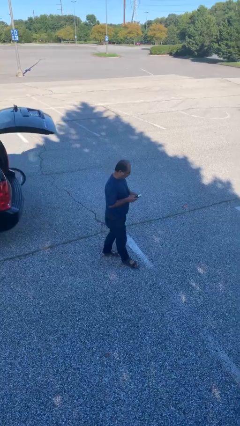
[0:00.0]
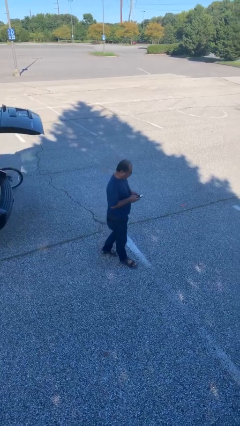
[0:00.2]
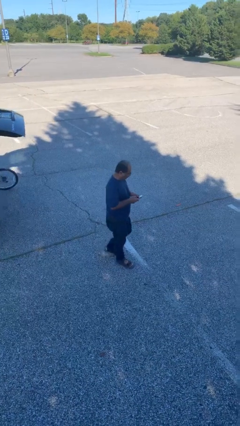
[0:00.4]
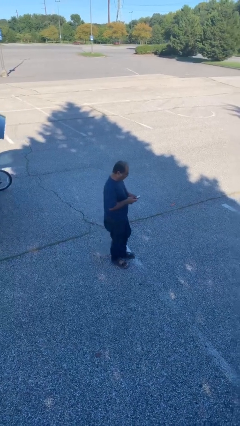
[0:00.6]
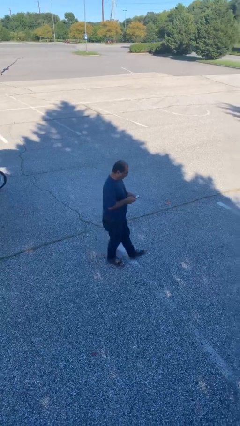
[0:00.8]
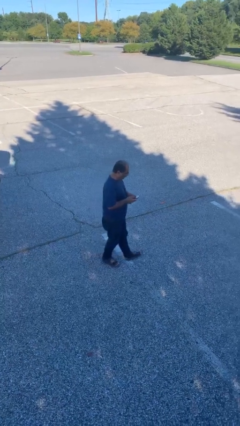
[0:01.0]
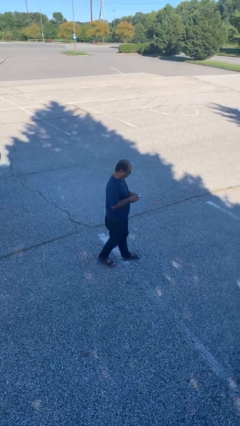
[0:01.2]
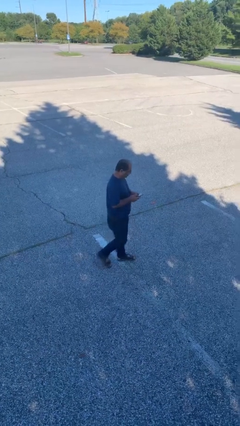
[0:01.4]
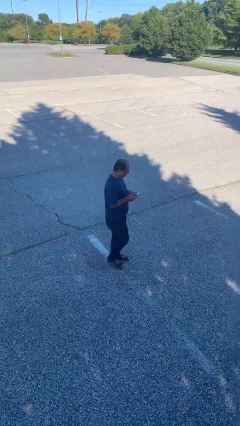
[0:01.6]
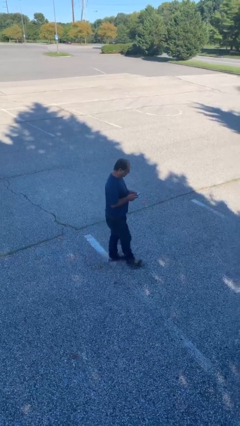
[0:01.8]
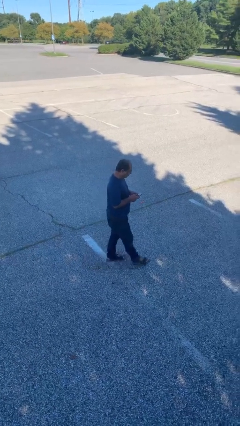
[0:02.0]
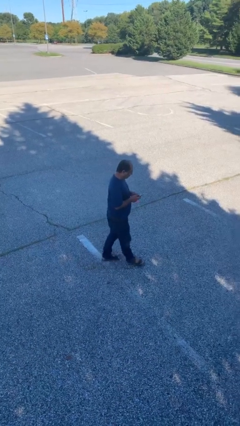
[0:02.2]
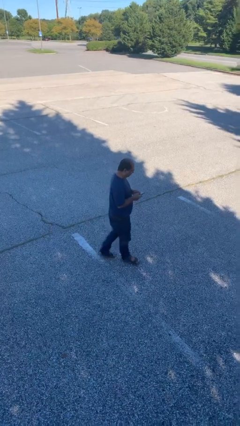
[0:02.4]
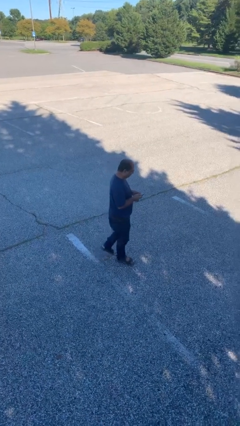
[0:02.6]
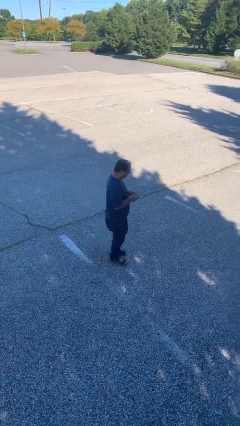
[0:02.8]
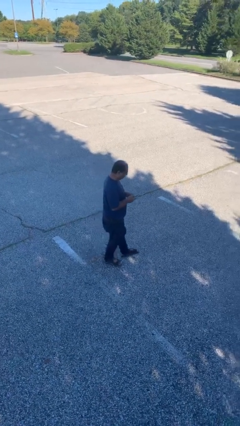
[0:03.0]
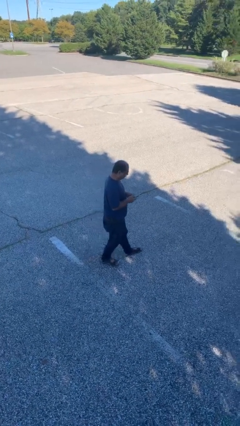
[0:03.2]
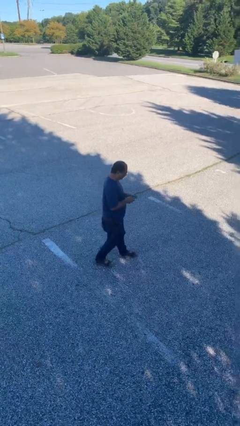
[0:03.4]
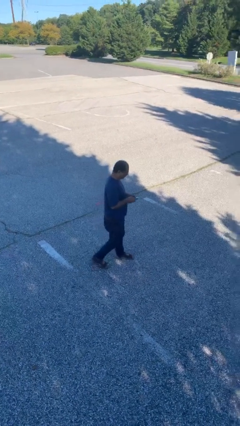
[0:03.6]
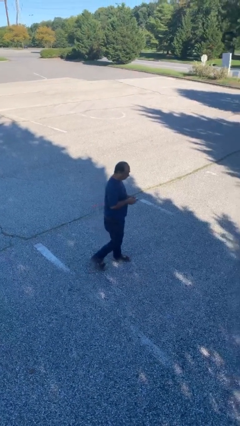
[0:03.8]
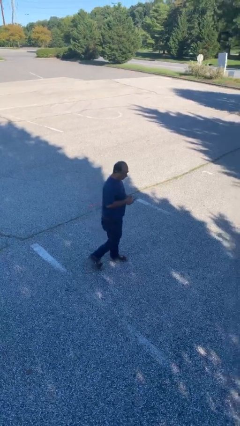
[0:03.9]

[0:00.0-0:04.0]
person texts on phone

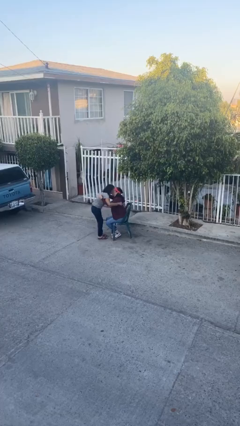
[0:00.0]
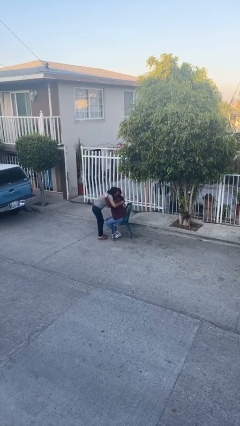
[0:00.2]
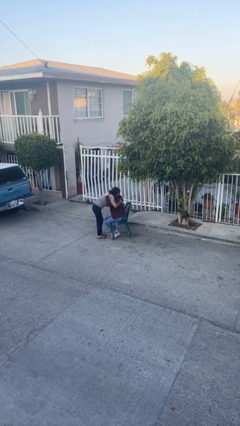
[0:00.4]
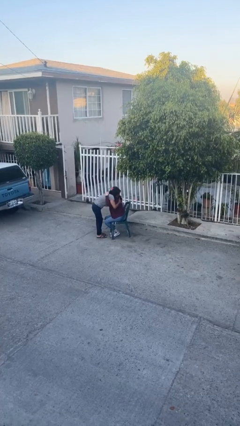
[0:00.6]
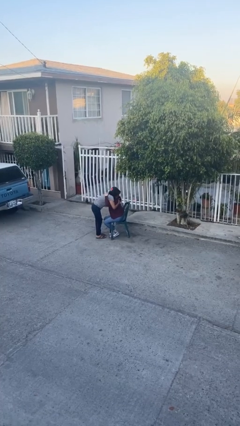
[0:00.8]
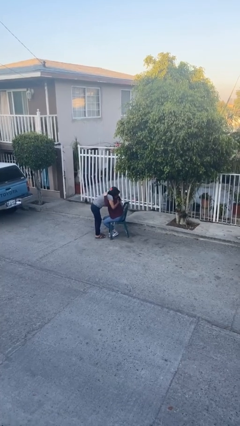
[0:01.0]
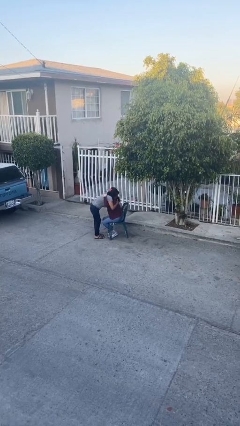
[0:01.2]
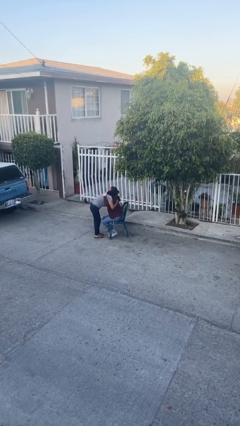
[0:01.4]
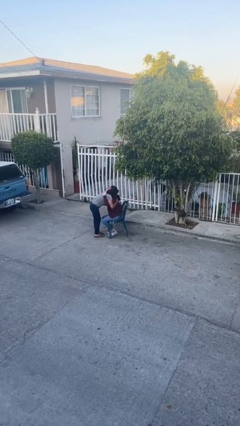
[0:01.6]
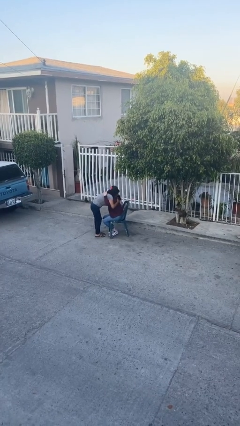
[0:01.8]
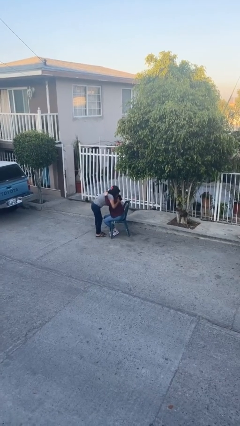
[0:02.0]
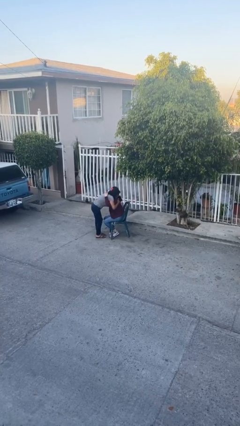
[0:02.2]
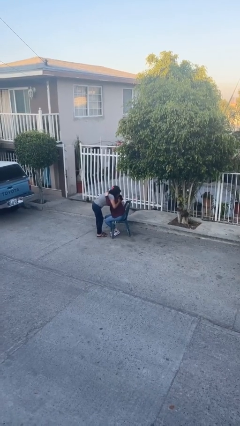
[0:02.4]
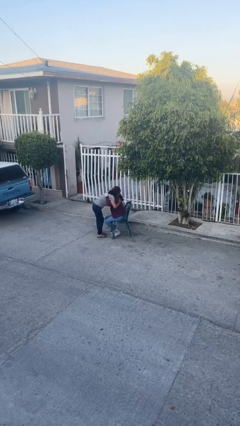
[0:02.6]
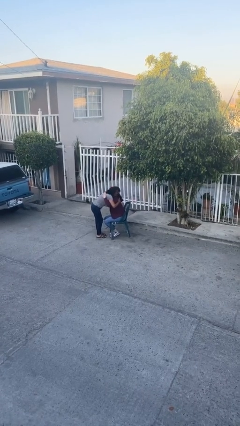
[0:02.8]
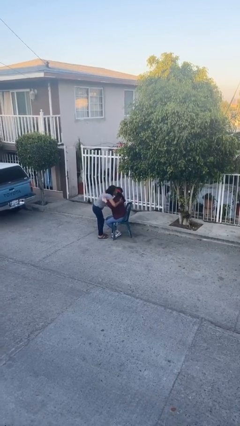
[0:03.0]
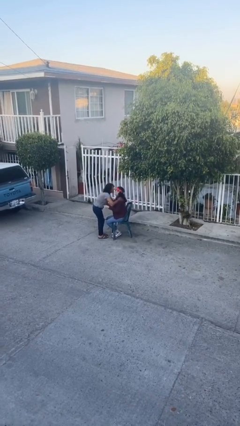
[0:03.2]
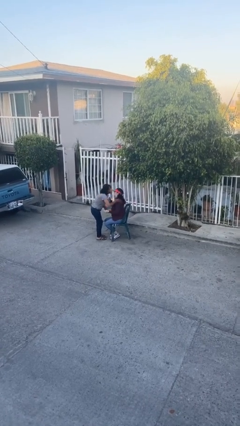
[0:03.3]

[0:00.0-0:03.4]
person embraces person

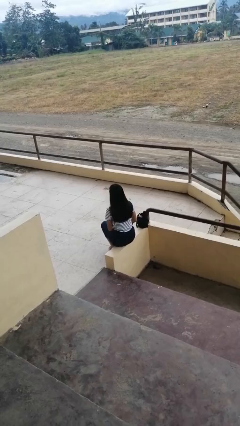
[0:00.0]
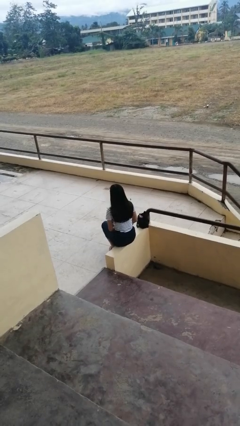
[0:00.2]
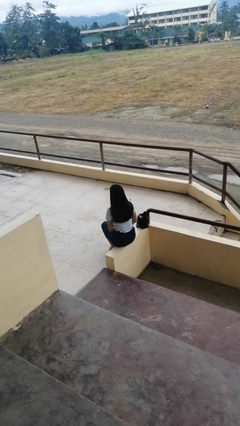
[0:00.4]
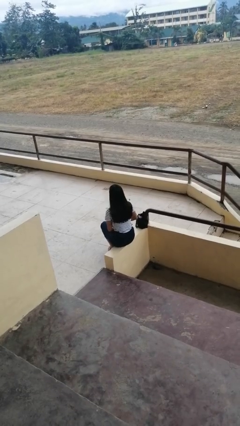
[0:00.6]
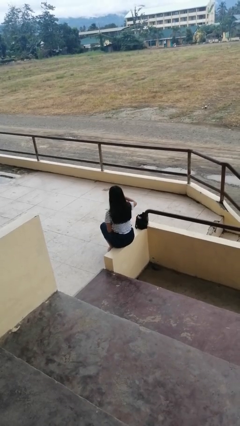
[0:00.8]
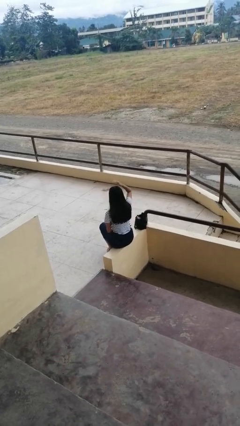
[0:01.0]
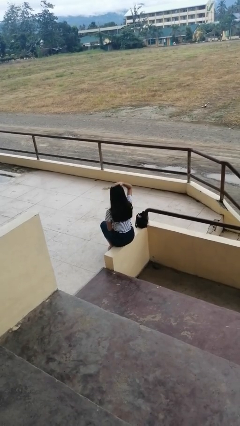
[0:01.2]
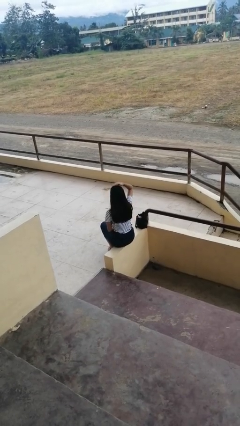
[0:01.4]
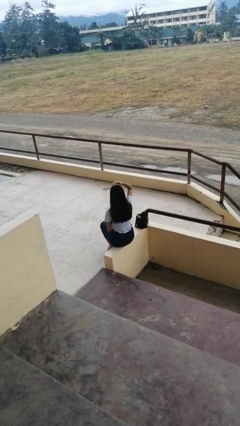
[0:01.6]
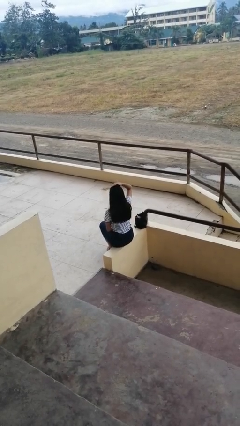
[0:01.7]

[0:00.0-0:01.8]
person pats head

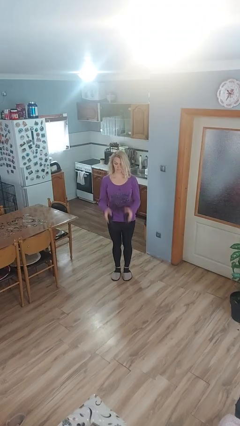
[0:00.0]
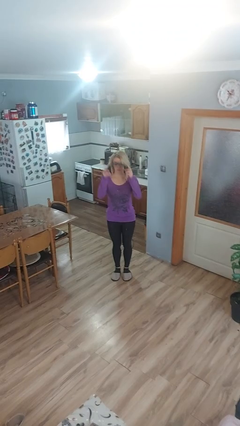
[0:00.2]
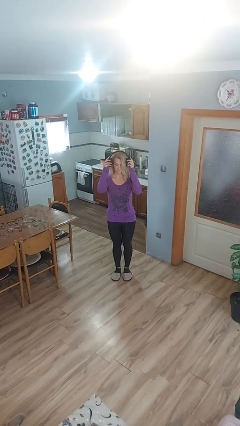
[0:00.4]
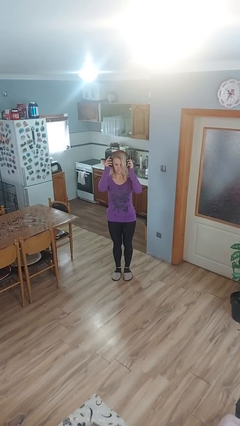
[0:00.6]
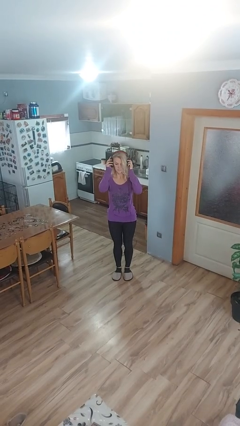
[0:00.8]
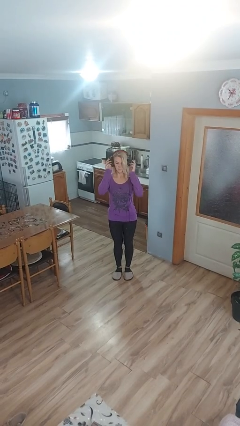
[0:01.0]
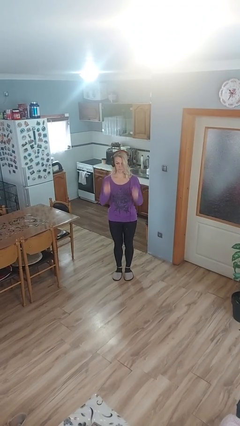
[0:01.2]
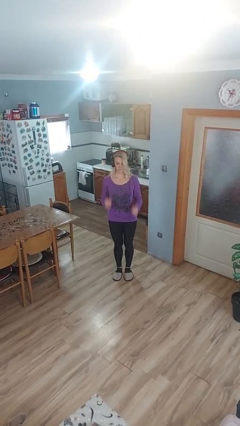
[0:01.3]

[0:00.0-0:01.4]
person puts on headphones

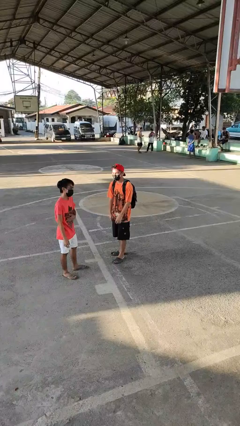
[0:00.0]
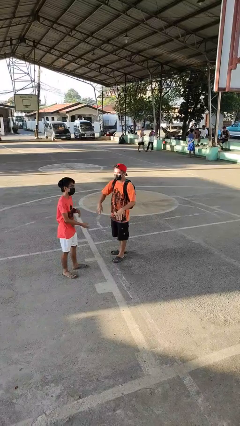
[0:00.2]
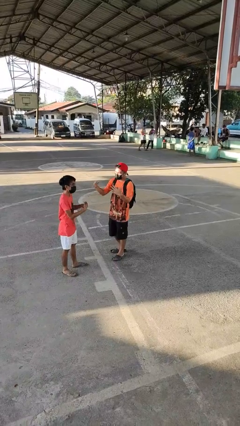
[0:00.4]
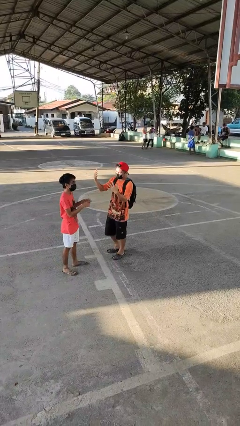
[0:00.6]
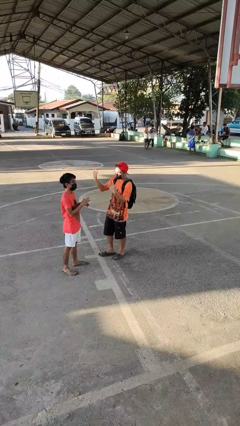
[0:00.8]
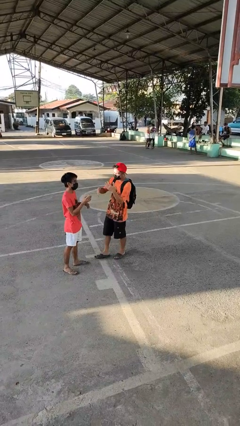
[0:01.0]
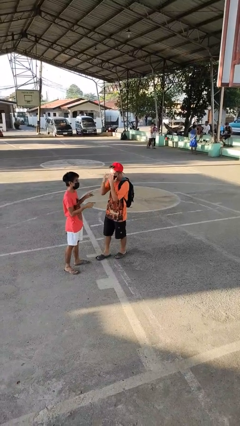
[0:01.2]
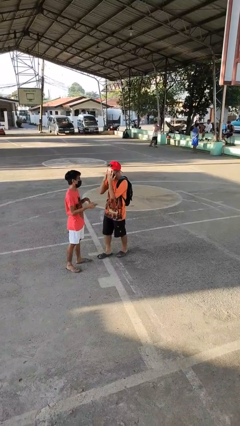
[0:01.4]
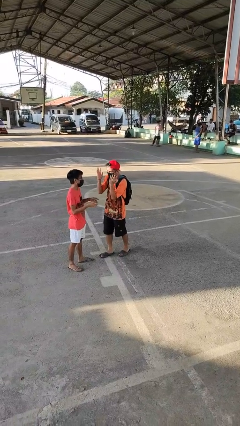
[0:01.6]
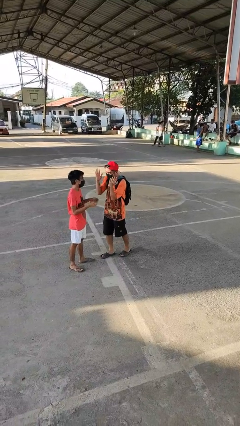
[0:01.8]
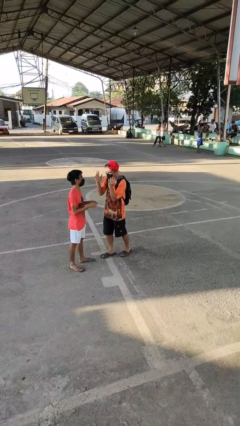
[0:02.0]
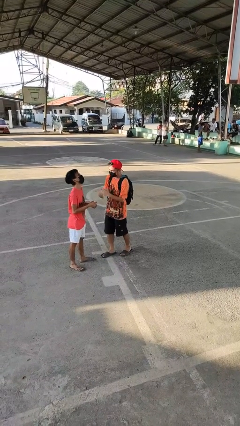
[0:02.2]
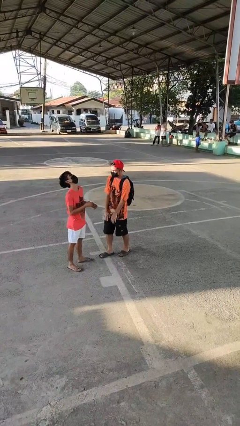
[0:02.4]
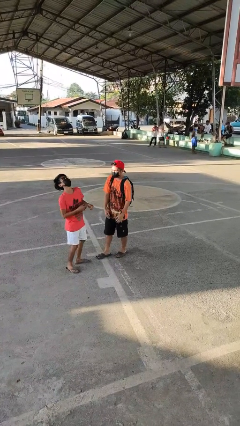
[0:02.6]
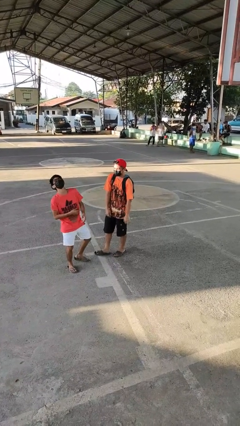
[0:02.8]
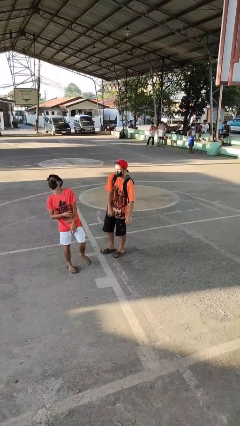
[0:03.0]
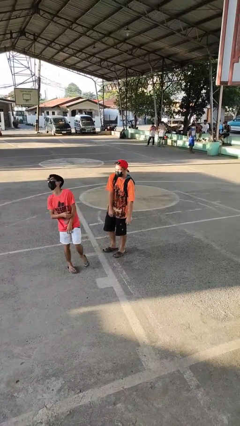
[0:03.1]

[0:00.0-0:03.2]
person talks to person

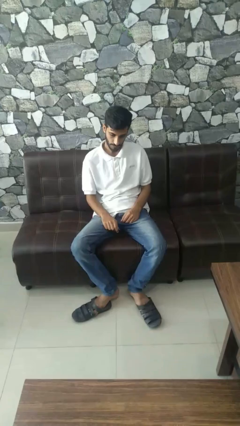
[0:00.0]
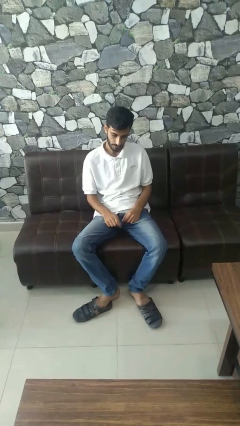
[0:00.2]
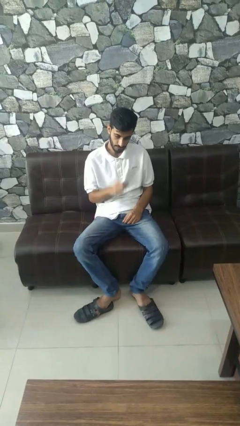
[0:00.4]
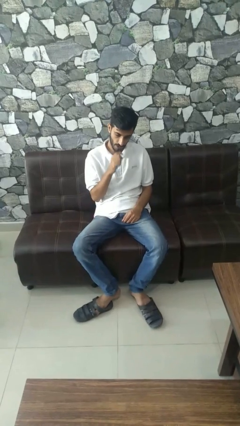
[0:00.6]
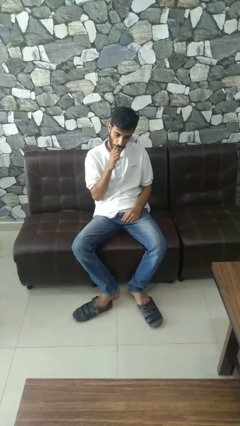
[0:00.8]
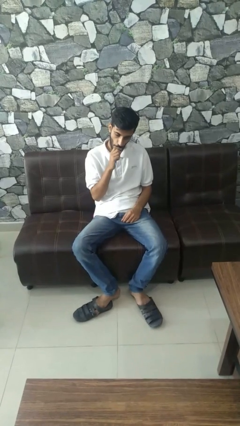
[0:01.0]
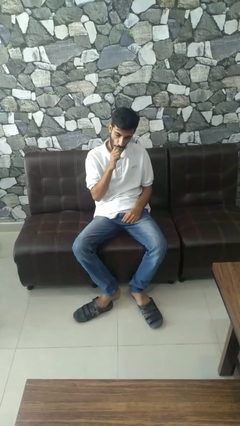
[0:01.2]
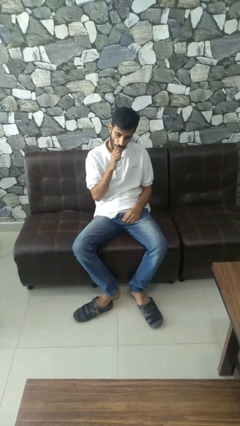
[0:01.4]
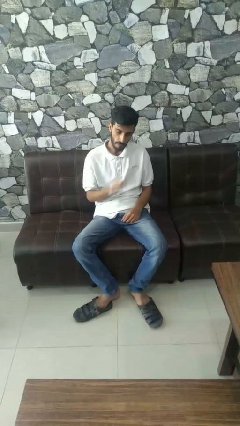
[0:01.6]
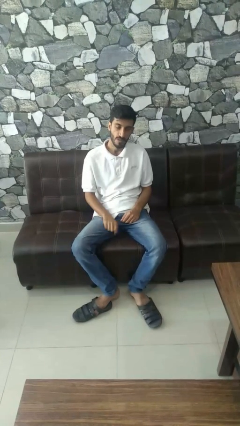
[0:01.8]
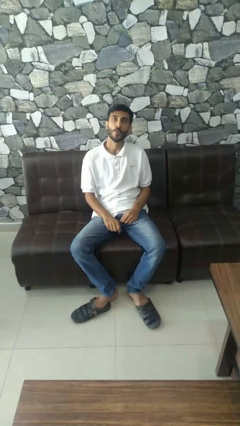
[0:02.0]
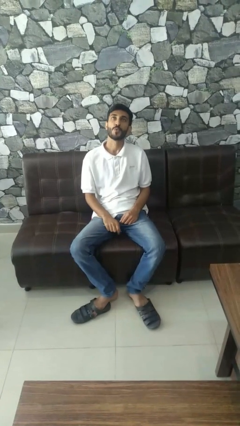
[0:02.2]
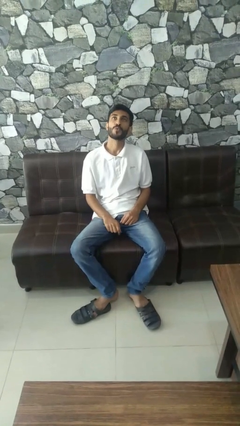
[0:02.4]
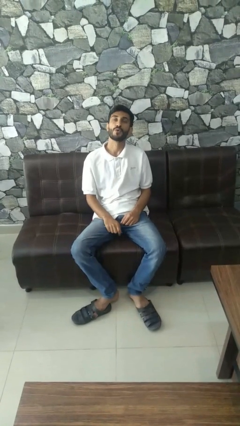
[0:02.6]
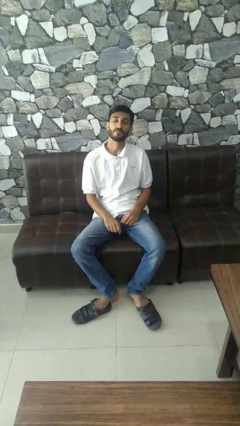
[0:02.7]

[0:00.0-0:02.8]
person vapes

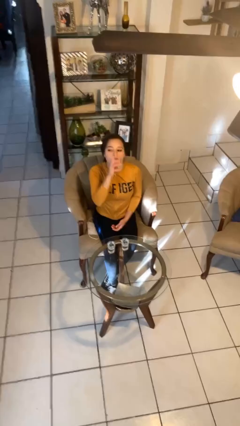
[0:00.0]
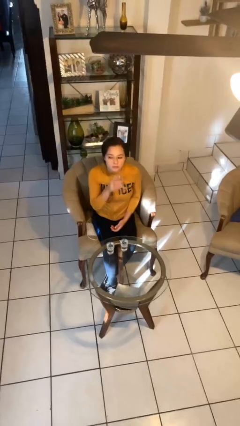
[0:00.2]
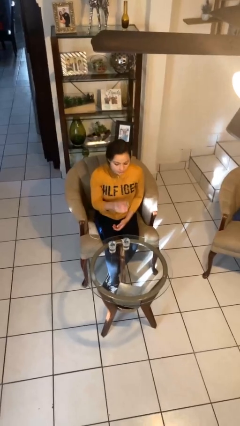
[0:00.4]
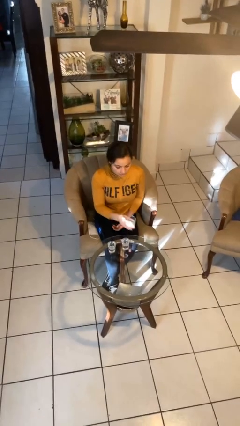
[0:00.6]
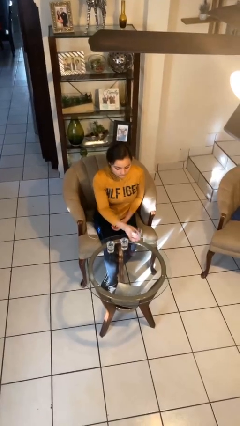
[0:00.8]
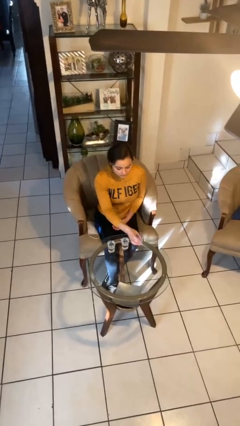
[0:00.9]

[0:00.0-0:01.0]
person puts down object on table
